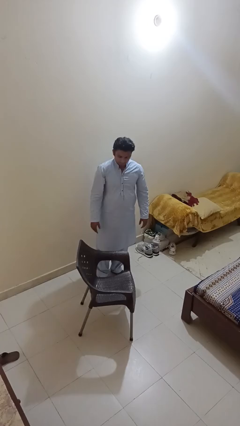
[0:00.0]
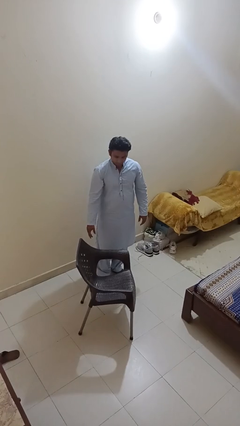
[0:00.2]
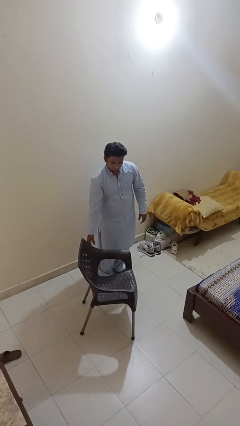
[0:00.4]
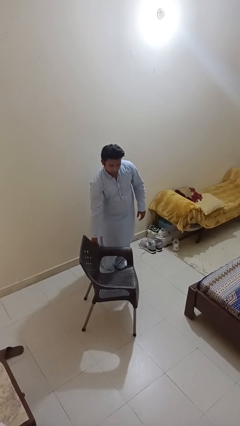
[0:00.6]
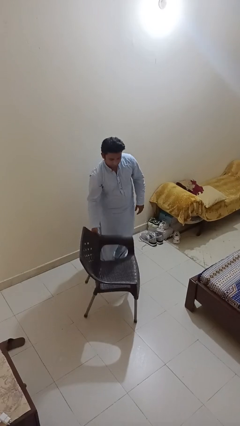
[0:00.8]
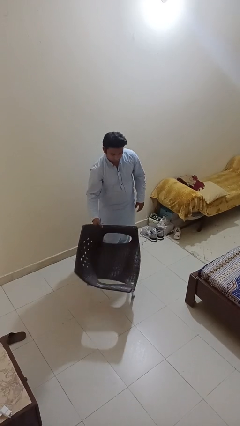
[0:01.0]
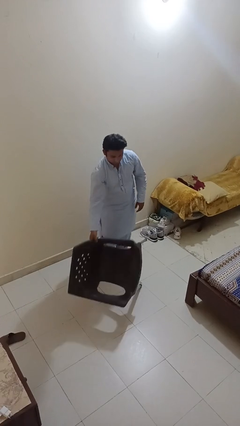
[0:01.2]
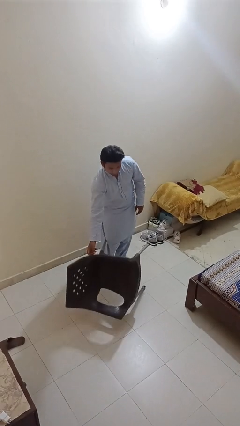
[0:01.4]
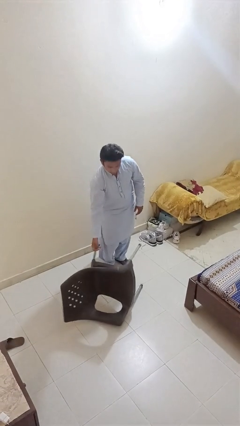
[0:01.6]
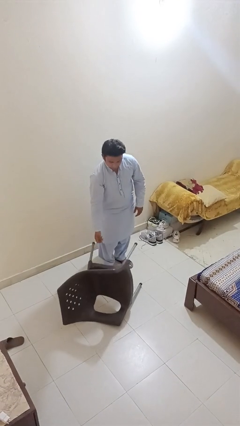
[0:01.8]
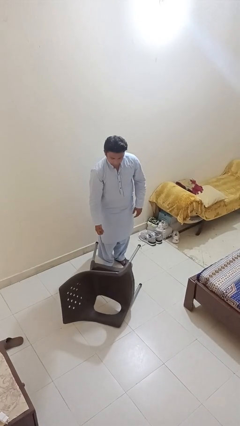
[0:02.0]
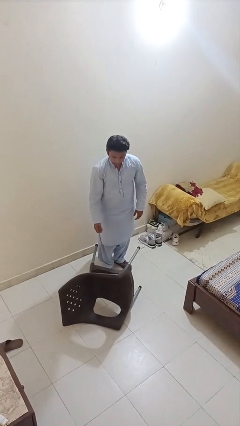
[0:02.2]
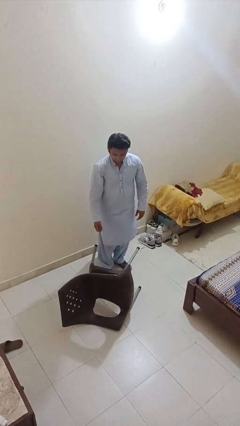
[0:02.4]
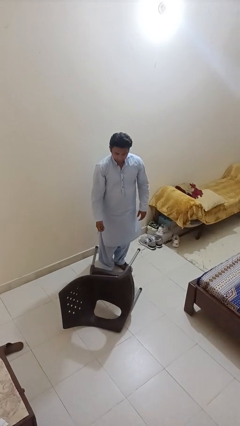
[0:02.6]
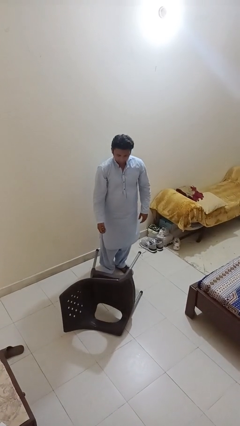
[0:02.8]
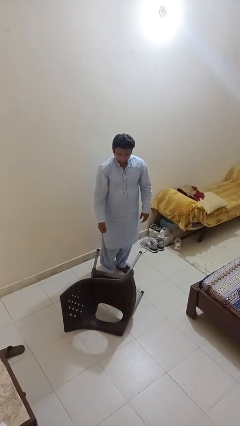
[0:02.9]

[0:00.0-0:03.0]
person knocks over furniture

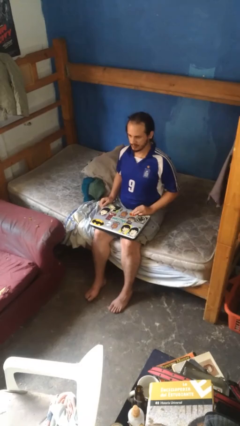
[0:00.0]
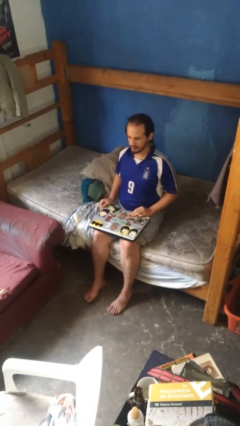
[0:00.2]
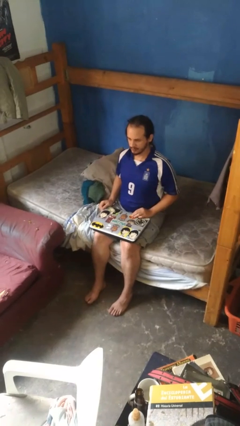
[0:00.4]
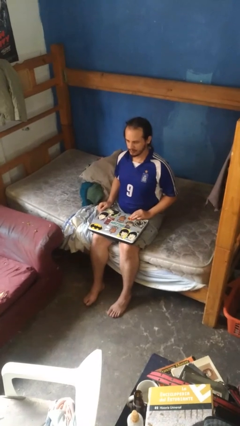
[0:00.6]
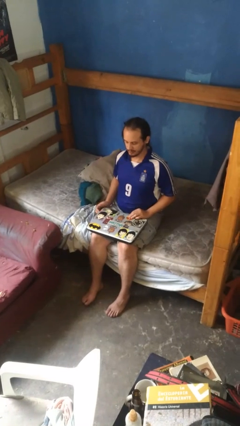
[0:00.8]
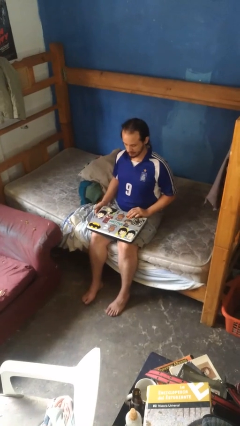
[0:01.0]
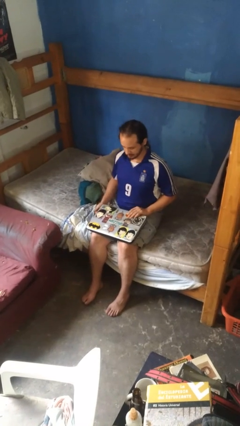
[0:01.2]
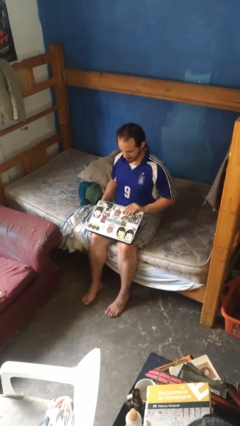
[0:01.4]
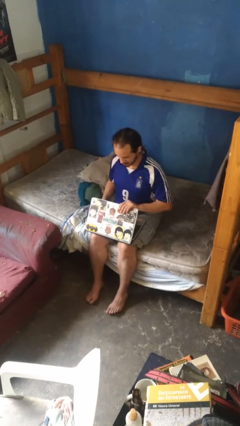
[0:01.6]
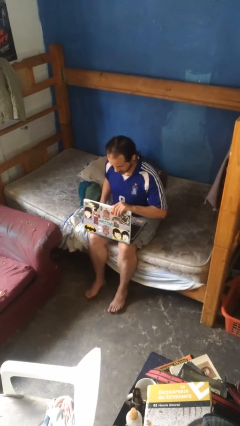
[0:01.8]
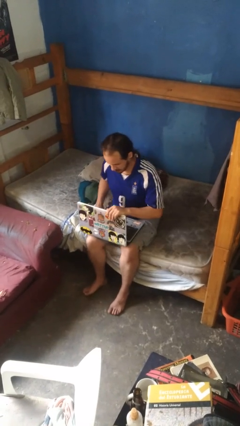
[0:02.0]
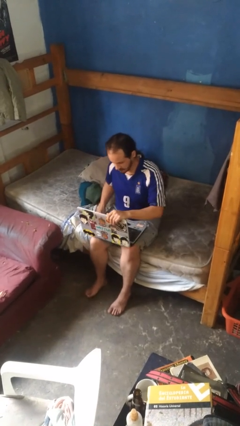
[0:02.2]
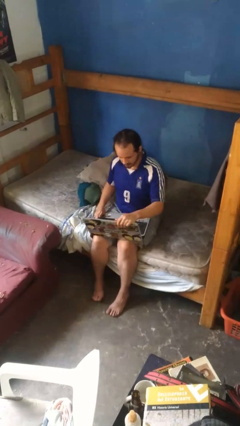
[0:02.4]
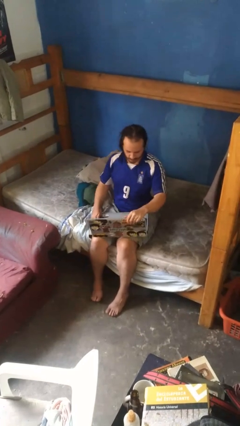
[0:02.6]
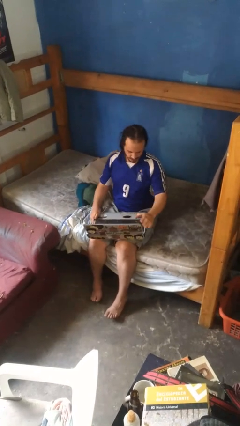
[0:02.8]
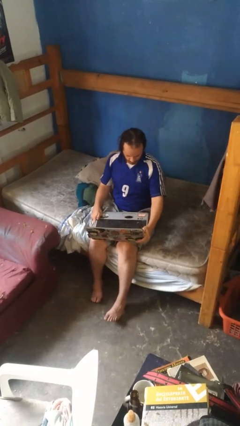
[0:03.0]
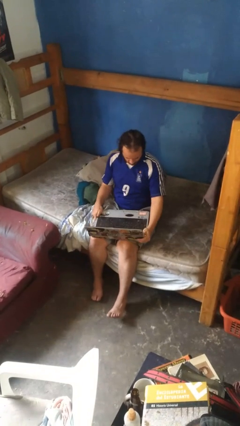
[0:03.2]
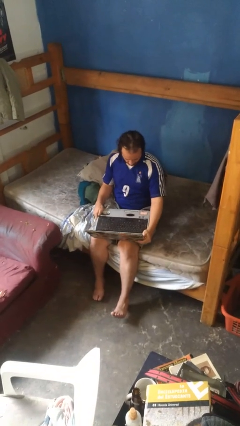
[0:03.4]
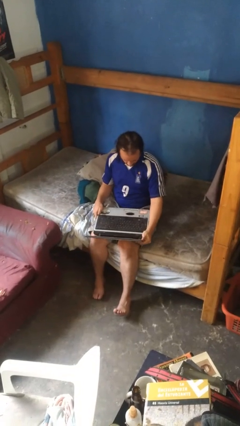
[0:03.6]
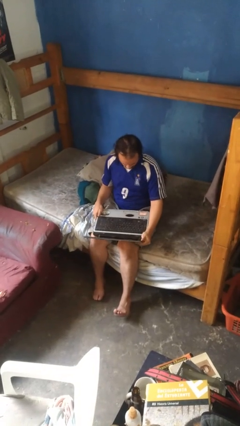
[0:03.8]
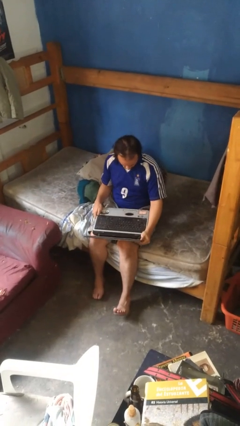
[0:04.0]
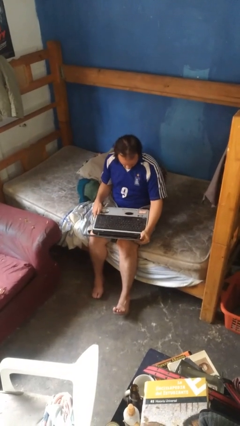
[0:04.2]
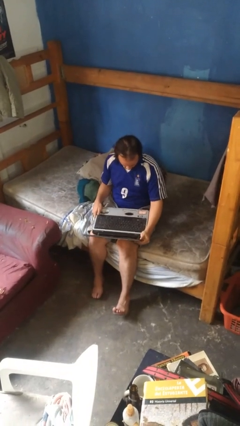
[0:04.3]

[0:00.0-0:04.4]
person opens laptop

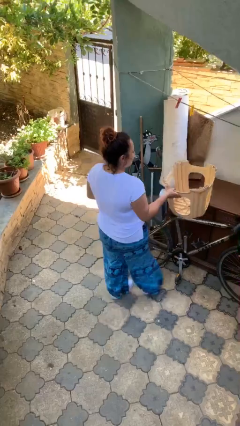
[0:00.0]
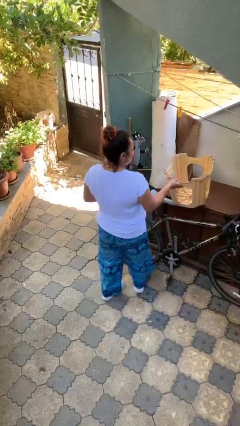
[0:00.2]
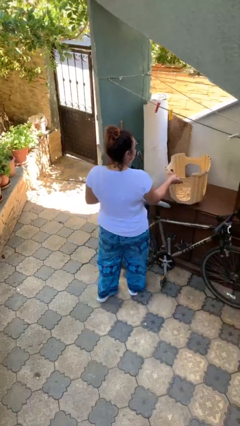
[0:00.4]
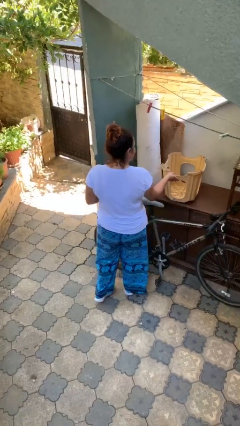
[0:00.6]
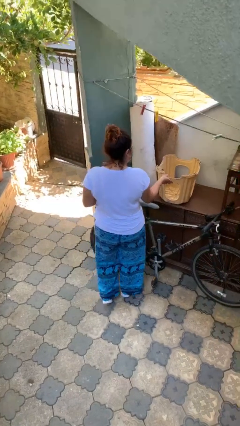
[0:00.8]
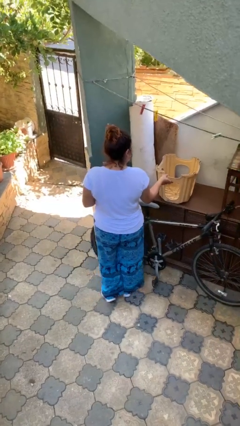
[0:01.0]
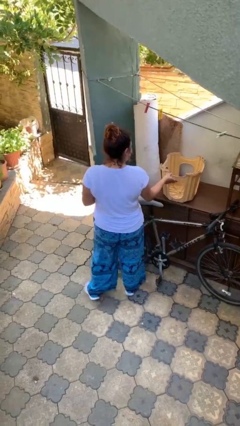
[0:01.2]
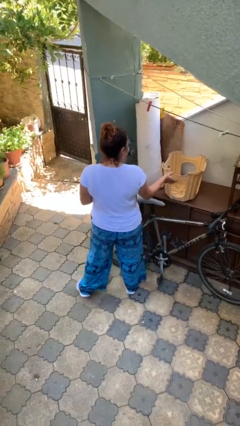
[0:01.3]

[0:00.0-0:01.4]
person puts down object on table

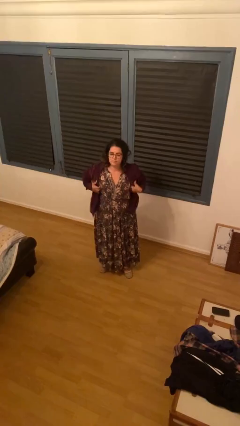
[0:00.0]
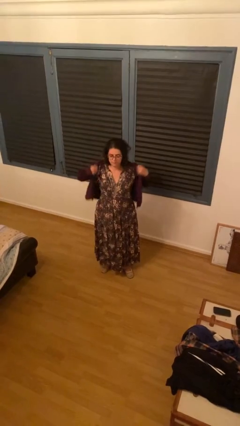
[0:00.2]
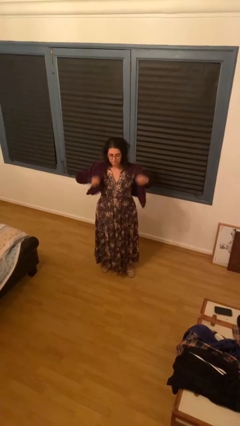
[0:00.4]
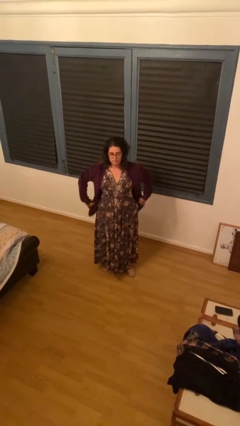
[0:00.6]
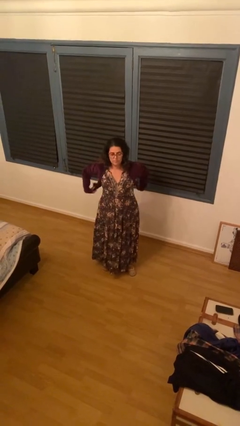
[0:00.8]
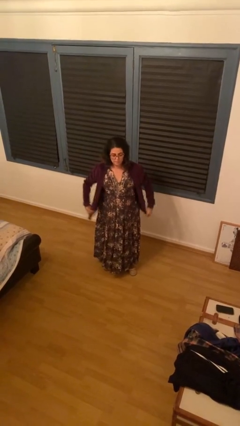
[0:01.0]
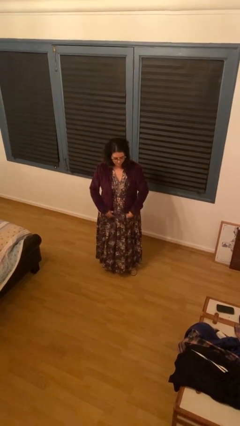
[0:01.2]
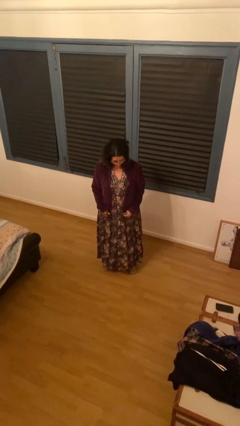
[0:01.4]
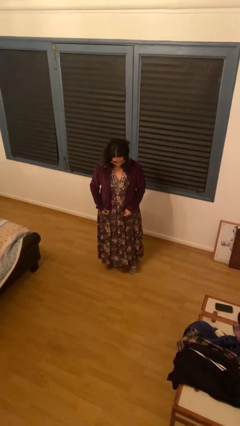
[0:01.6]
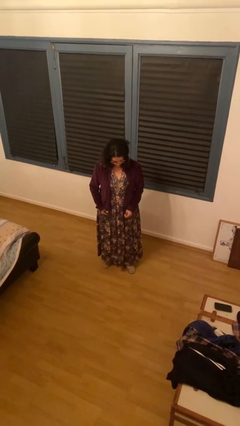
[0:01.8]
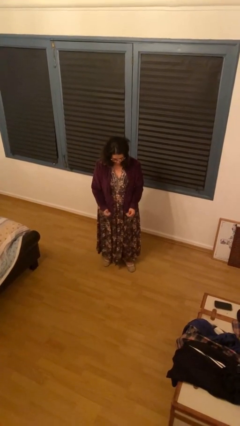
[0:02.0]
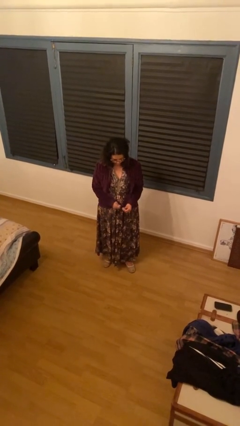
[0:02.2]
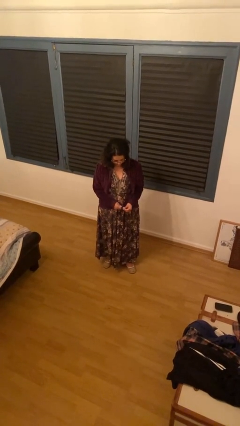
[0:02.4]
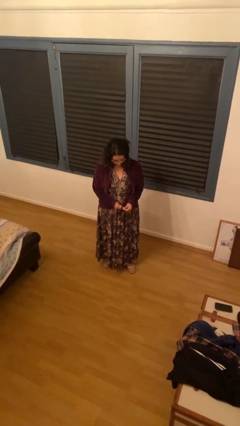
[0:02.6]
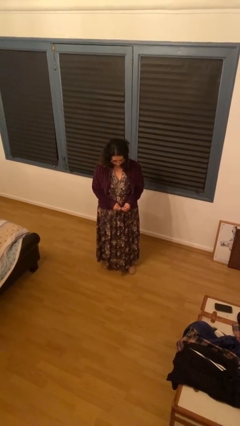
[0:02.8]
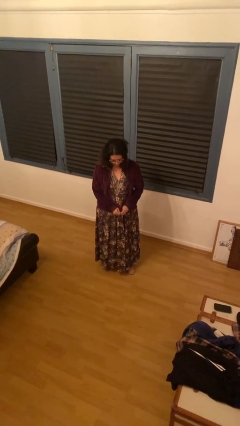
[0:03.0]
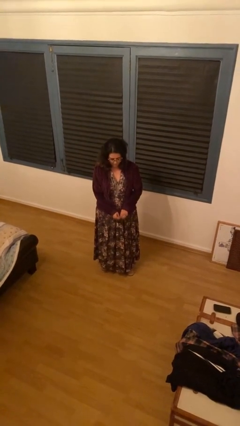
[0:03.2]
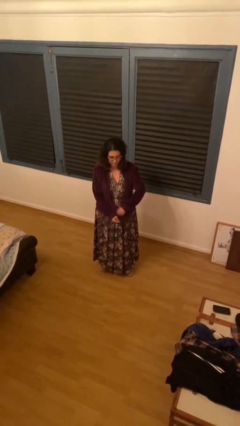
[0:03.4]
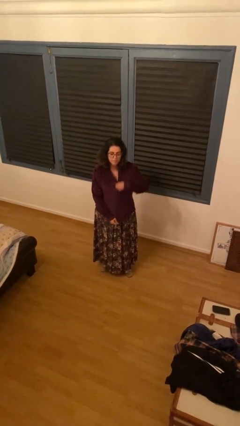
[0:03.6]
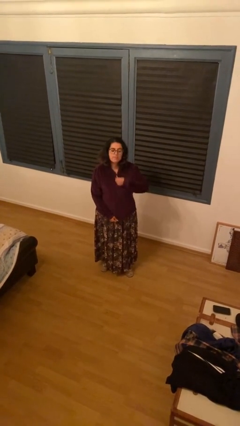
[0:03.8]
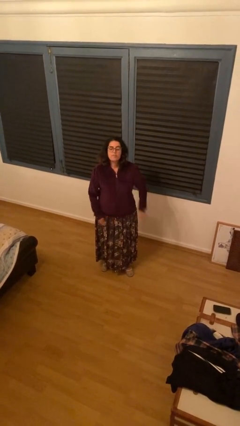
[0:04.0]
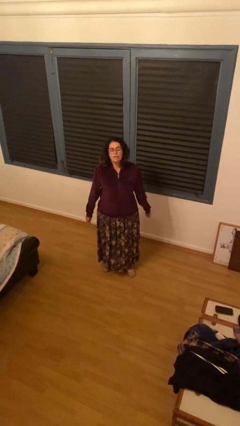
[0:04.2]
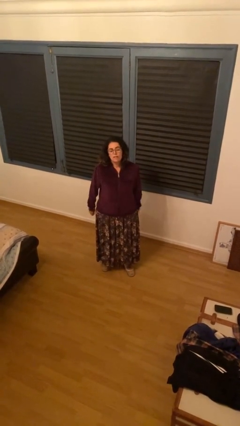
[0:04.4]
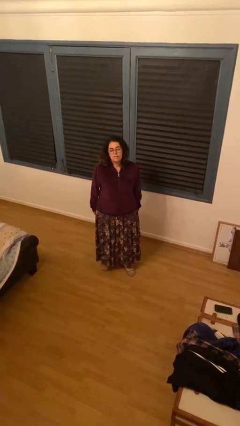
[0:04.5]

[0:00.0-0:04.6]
person zips up jacket

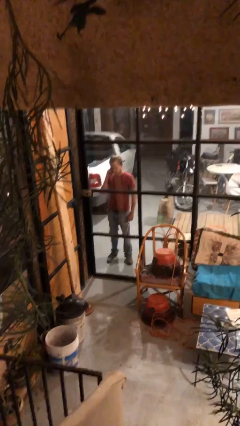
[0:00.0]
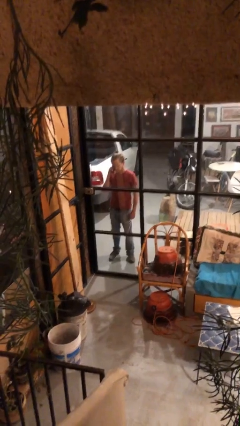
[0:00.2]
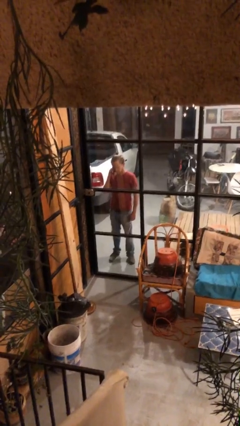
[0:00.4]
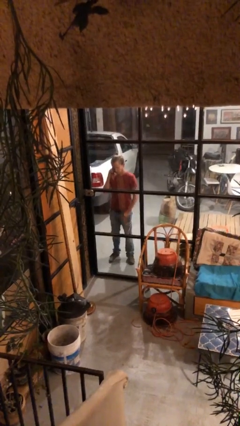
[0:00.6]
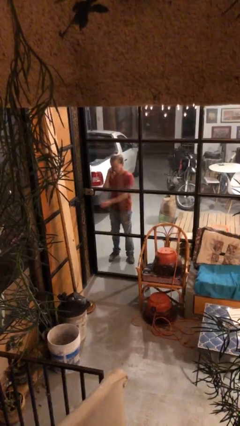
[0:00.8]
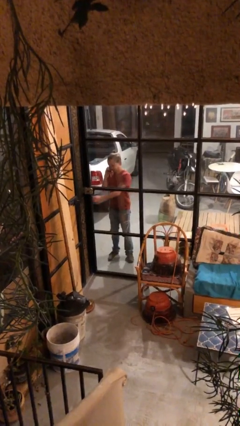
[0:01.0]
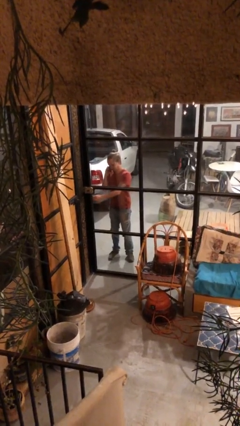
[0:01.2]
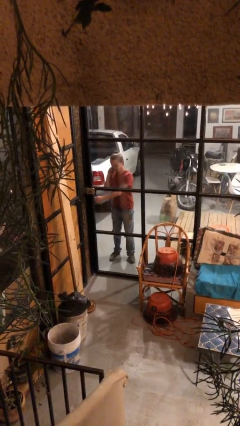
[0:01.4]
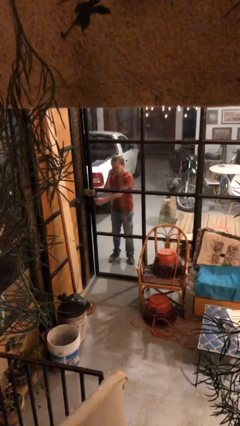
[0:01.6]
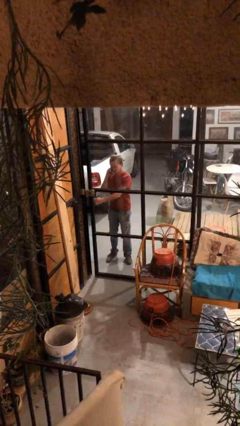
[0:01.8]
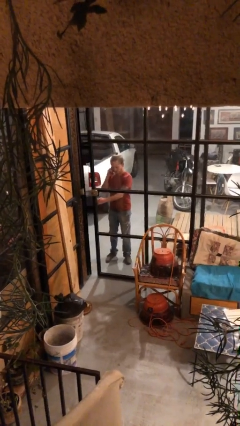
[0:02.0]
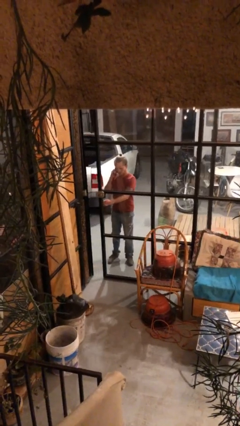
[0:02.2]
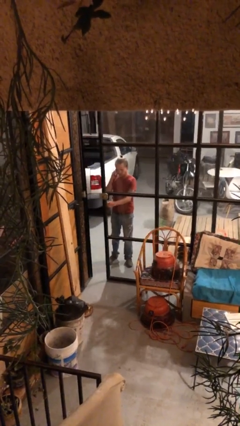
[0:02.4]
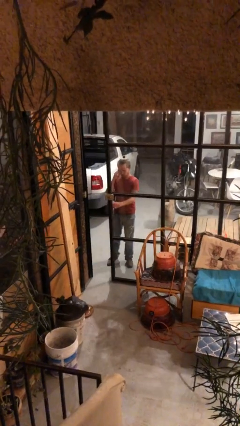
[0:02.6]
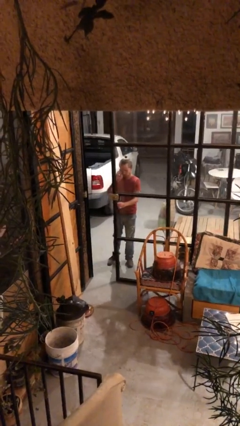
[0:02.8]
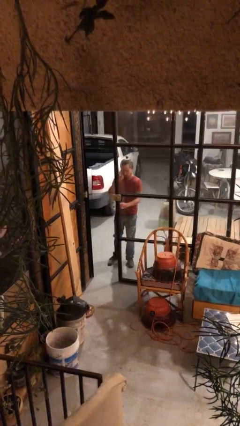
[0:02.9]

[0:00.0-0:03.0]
person opens facility door

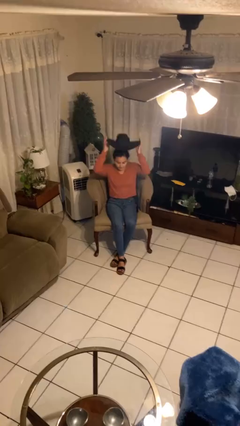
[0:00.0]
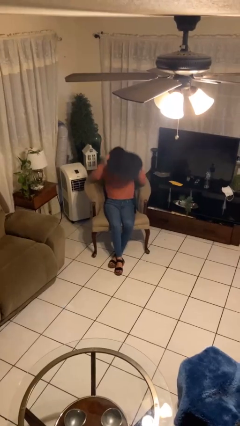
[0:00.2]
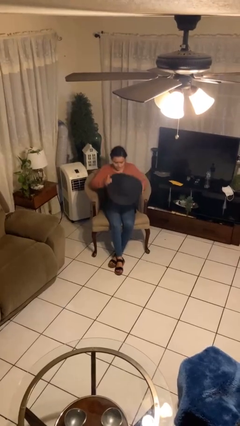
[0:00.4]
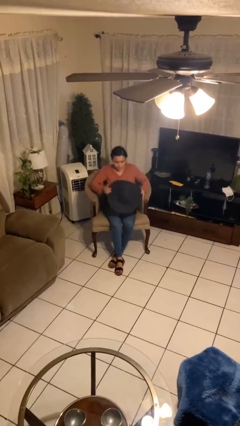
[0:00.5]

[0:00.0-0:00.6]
person takes off hat
